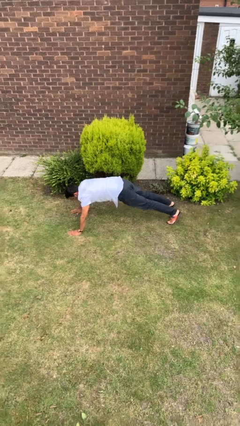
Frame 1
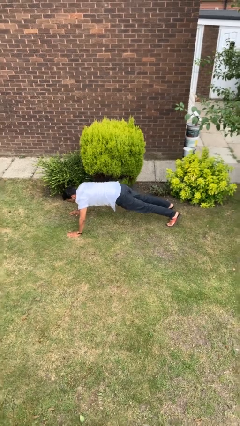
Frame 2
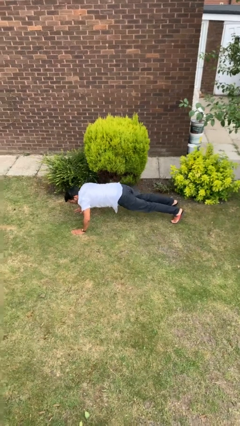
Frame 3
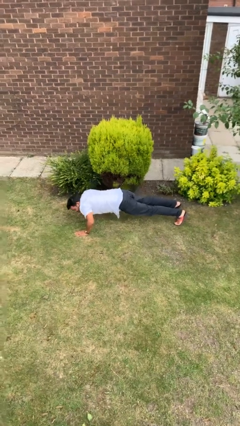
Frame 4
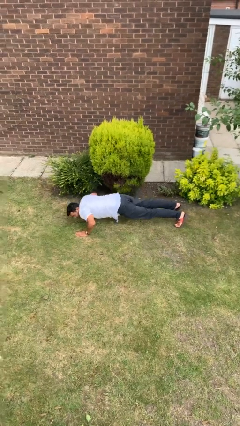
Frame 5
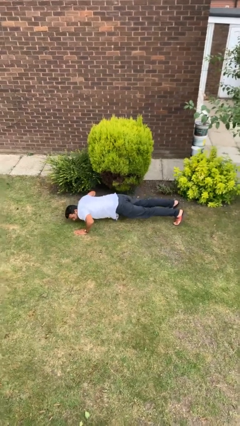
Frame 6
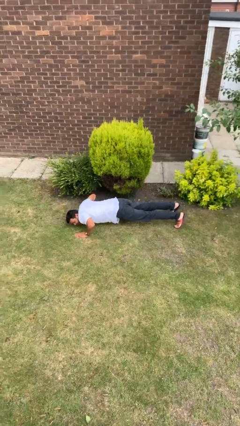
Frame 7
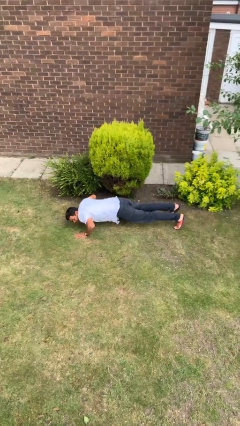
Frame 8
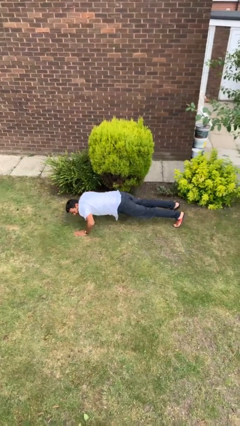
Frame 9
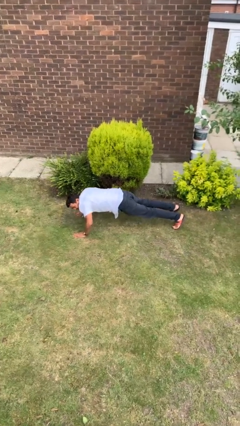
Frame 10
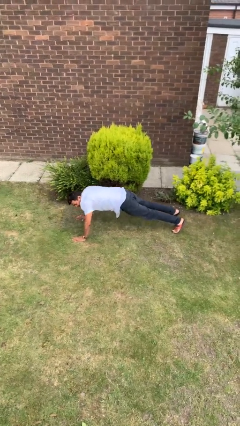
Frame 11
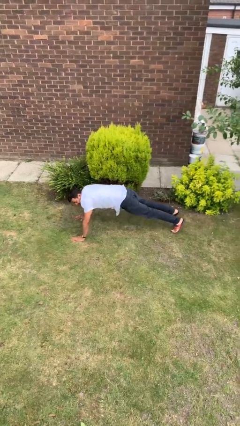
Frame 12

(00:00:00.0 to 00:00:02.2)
person exercises with pushup

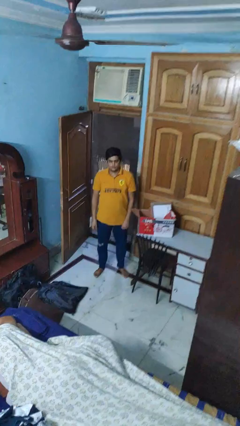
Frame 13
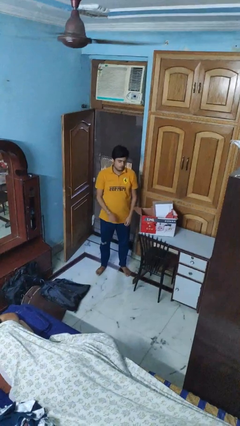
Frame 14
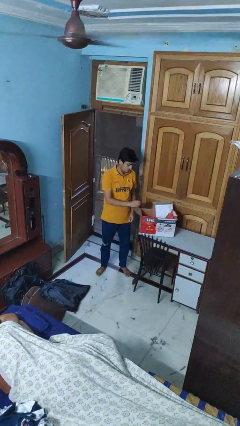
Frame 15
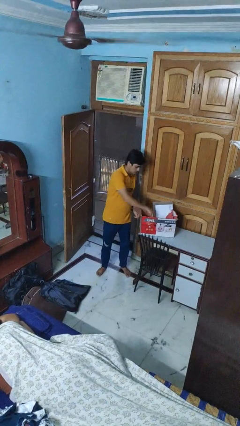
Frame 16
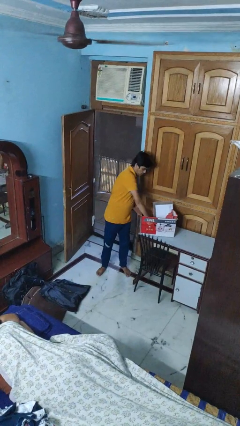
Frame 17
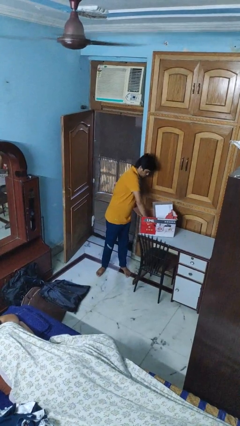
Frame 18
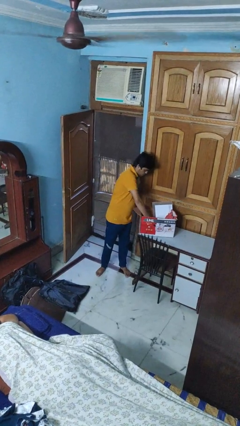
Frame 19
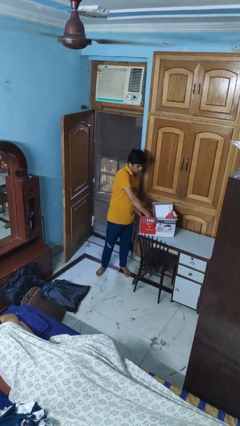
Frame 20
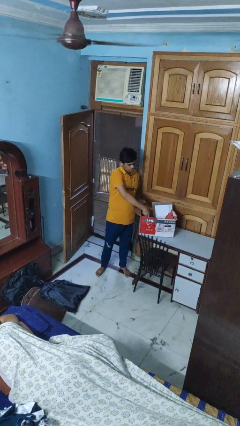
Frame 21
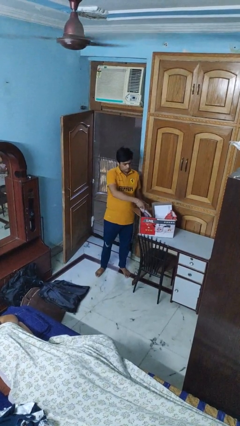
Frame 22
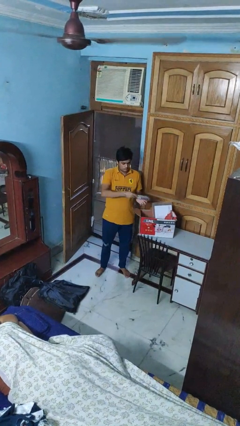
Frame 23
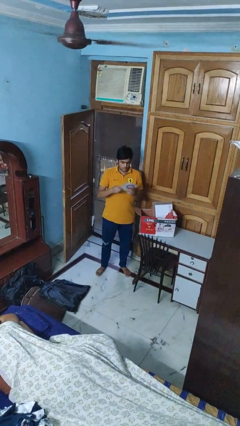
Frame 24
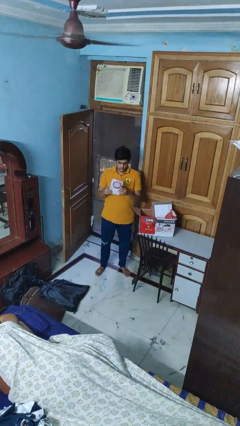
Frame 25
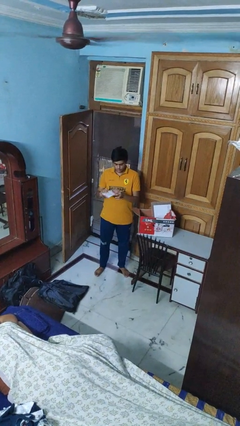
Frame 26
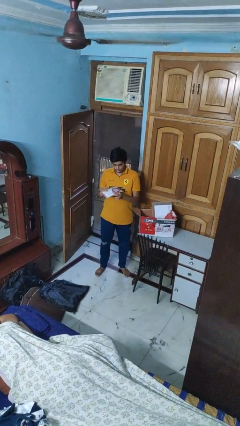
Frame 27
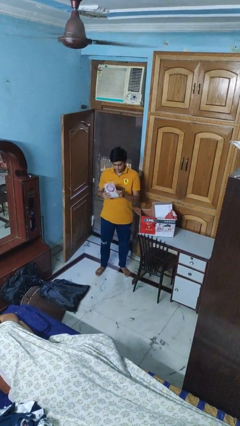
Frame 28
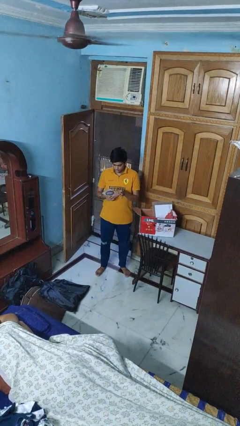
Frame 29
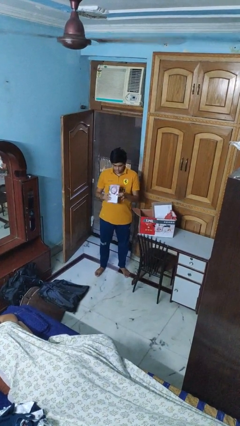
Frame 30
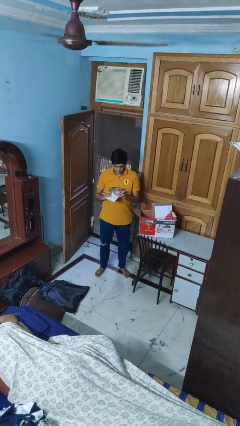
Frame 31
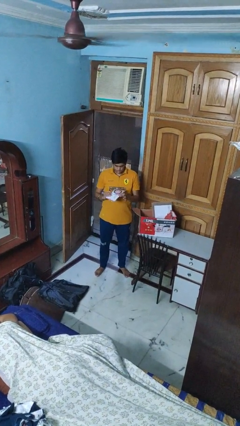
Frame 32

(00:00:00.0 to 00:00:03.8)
person takes object from box

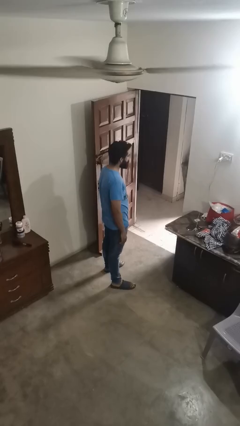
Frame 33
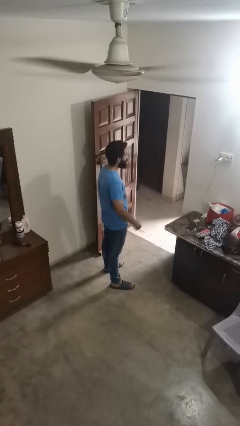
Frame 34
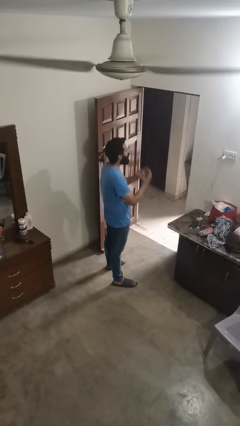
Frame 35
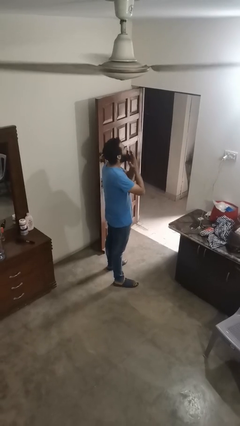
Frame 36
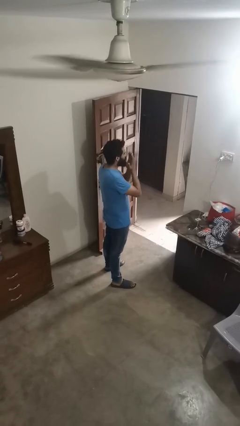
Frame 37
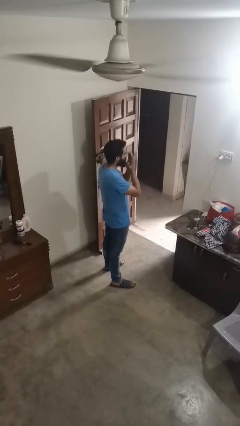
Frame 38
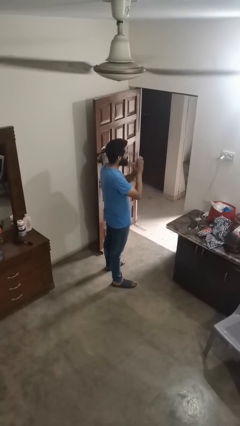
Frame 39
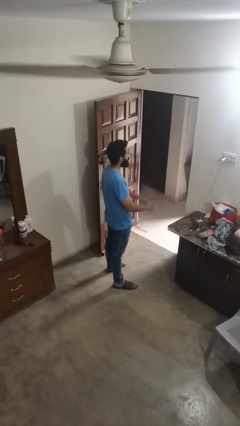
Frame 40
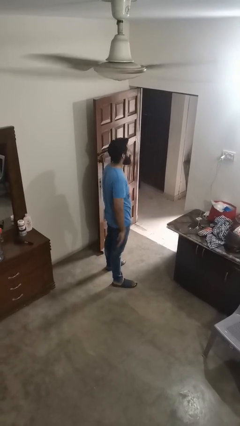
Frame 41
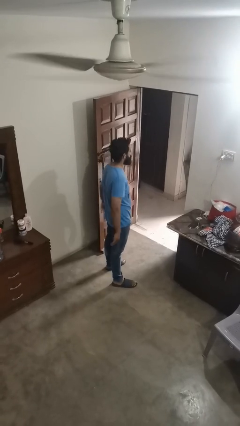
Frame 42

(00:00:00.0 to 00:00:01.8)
person sneezes into hand

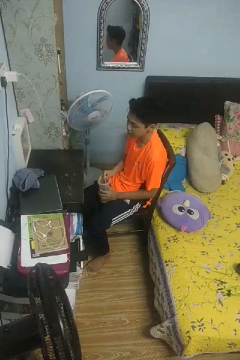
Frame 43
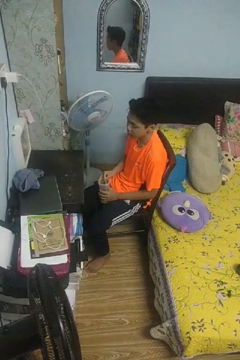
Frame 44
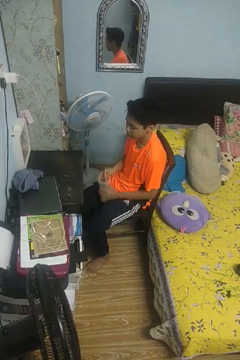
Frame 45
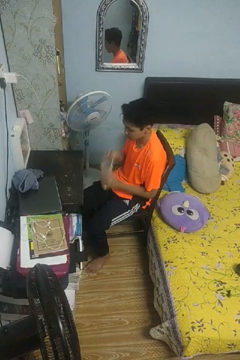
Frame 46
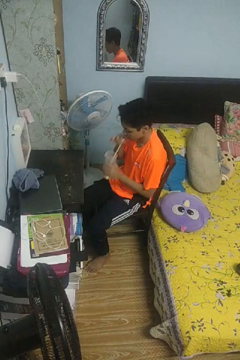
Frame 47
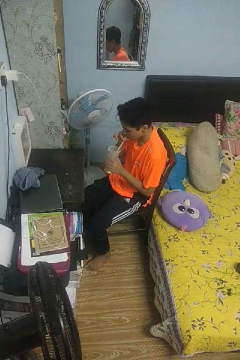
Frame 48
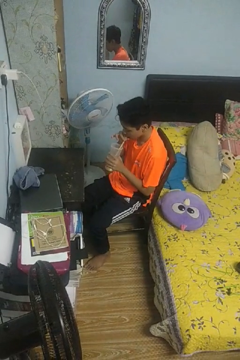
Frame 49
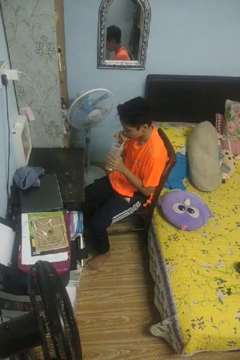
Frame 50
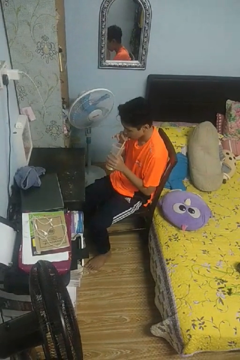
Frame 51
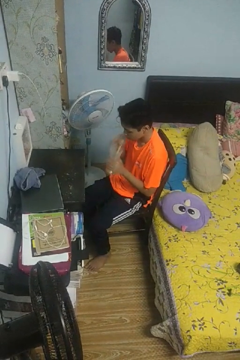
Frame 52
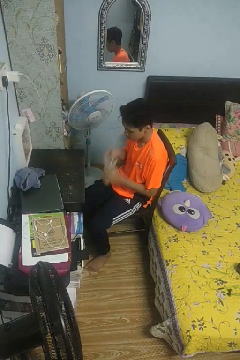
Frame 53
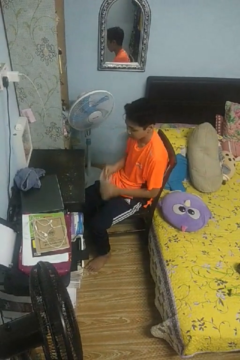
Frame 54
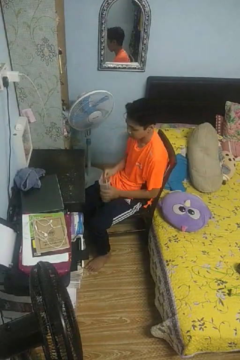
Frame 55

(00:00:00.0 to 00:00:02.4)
person drinks from straw

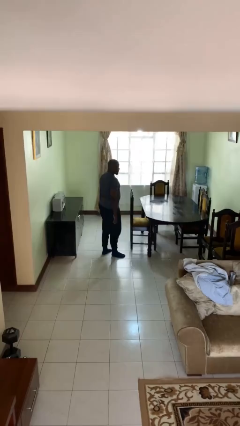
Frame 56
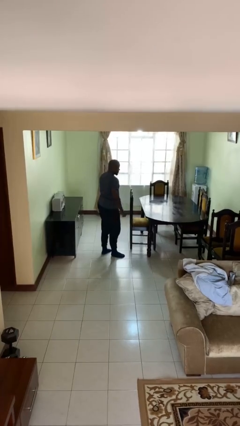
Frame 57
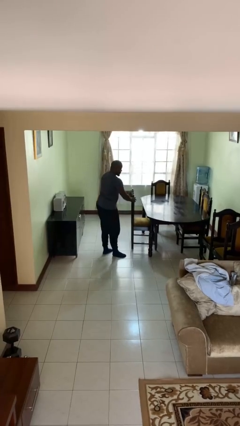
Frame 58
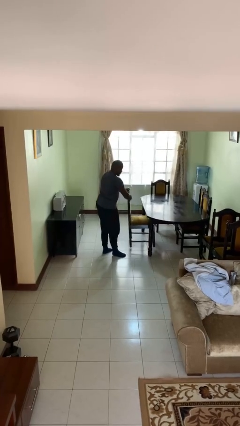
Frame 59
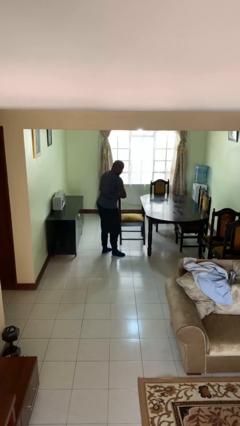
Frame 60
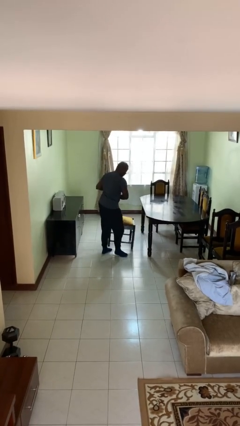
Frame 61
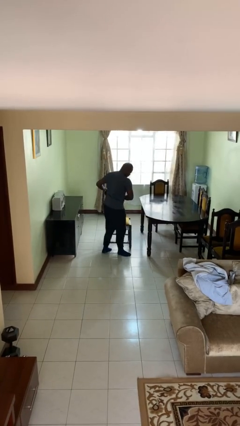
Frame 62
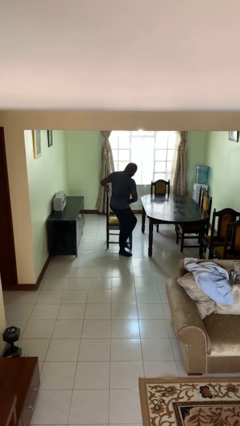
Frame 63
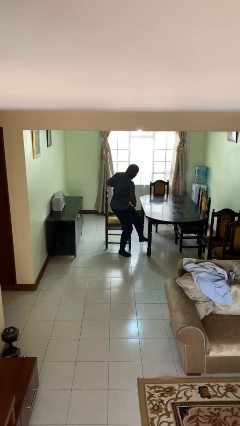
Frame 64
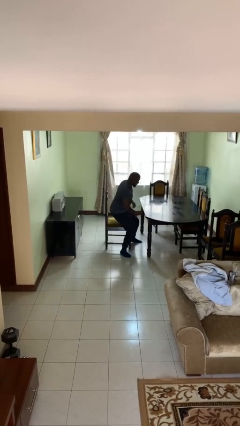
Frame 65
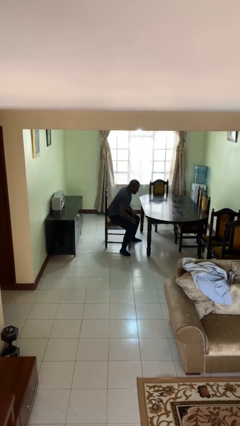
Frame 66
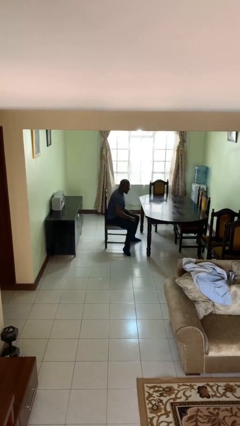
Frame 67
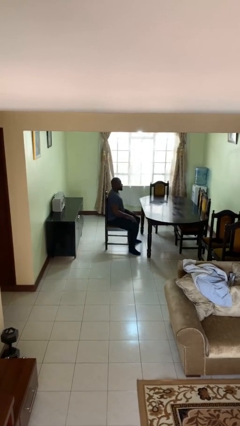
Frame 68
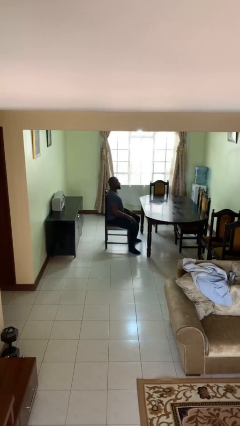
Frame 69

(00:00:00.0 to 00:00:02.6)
person sits down

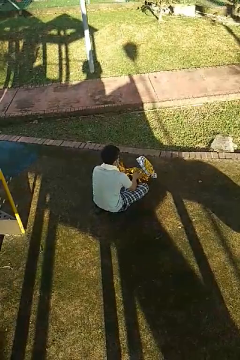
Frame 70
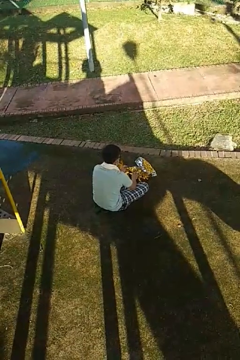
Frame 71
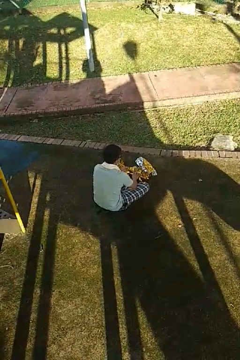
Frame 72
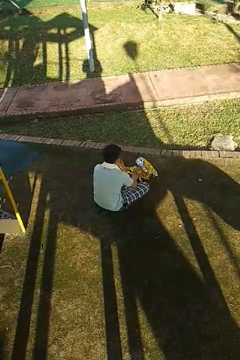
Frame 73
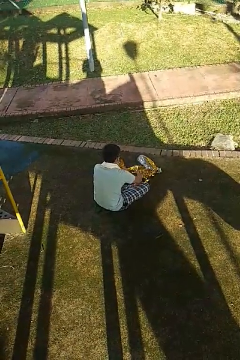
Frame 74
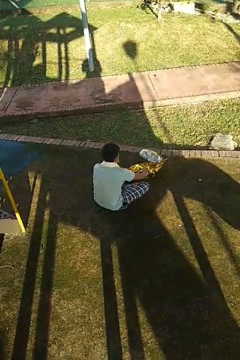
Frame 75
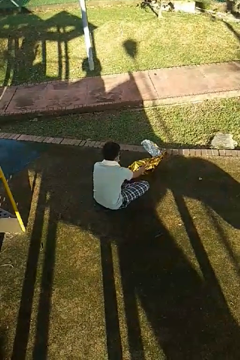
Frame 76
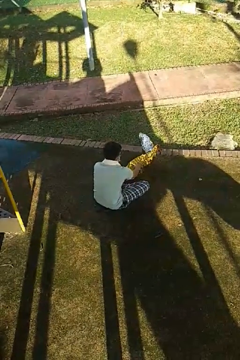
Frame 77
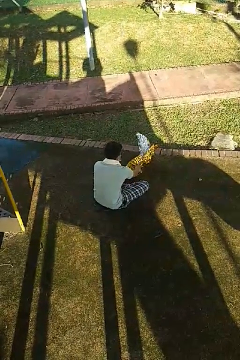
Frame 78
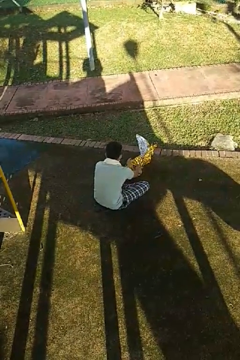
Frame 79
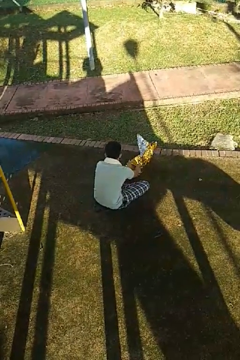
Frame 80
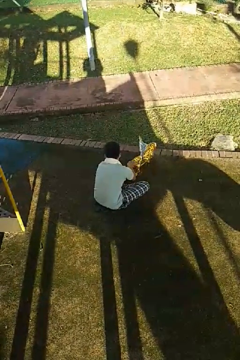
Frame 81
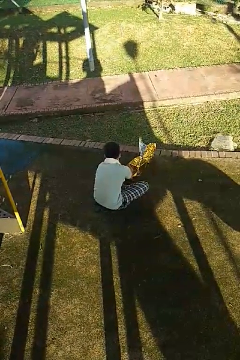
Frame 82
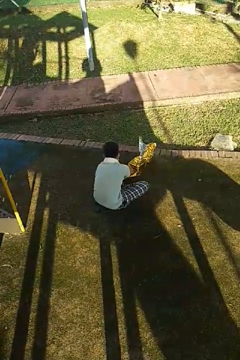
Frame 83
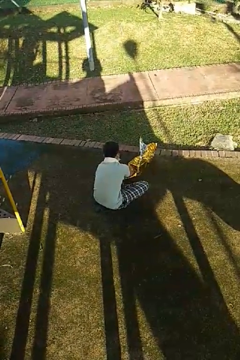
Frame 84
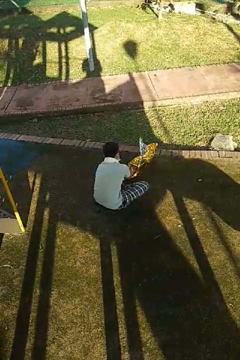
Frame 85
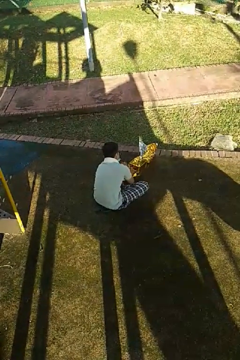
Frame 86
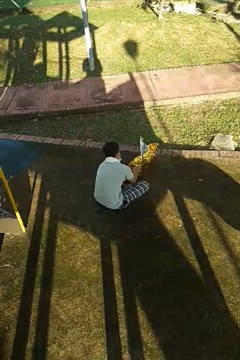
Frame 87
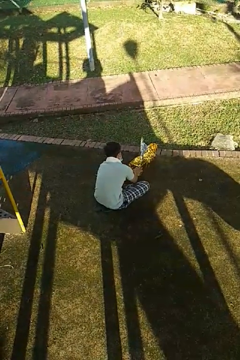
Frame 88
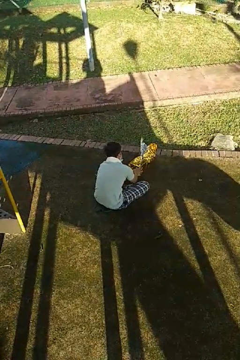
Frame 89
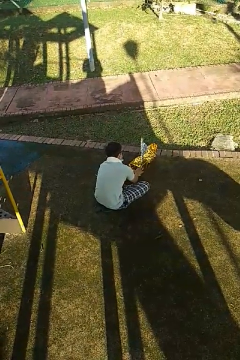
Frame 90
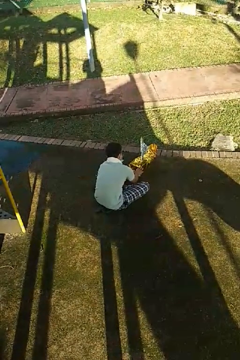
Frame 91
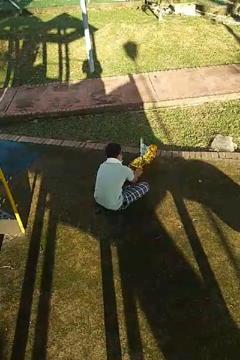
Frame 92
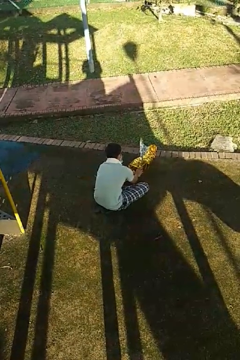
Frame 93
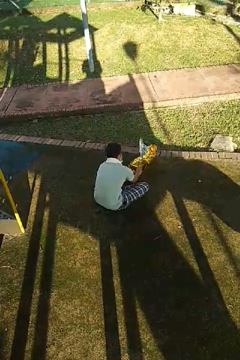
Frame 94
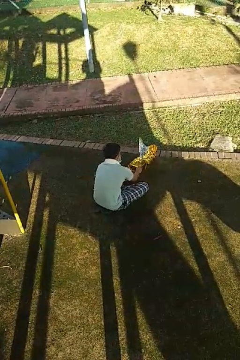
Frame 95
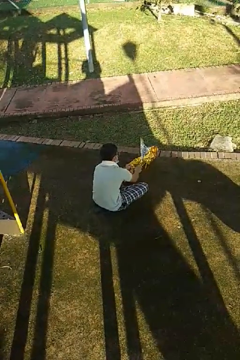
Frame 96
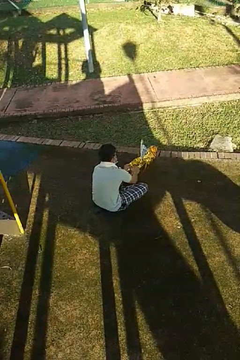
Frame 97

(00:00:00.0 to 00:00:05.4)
person wraps box

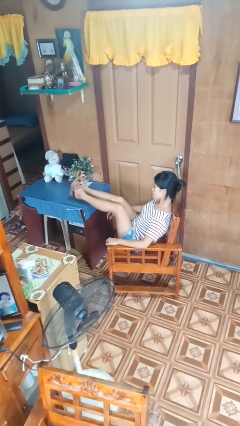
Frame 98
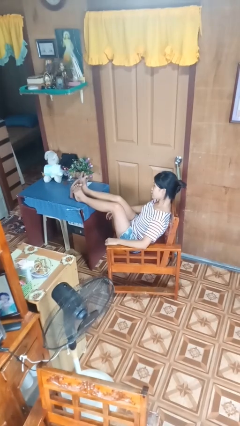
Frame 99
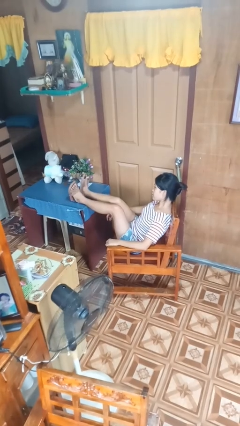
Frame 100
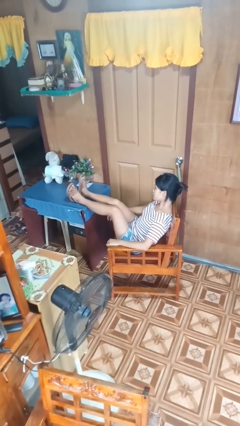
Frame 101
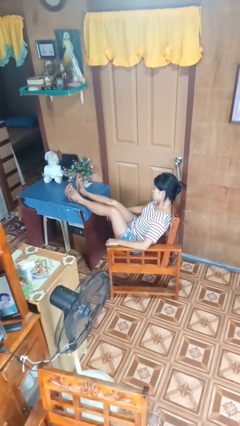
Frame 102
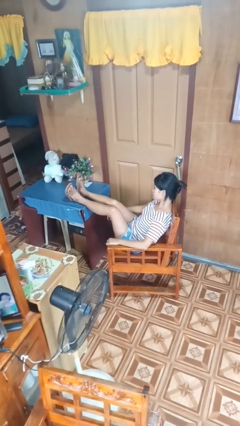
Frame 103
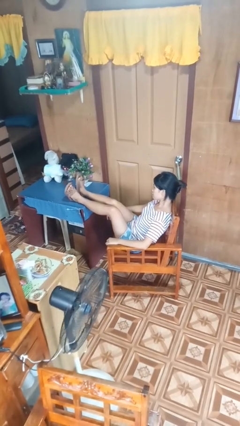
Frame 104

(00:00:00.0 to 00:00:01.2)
person puts feet up
